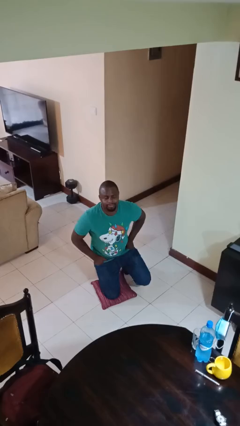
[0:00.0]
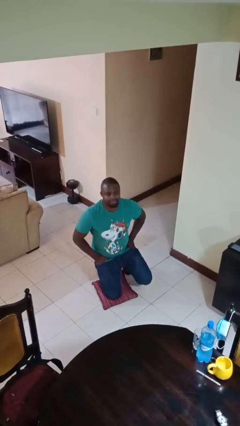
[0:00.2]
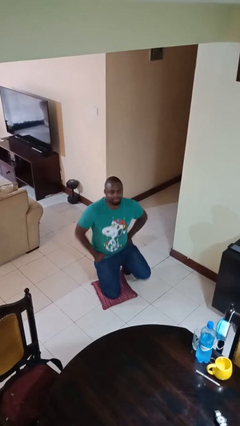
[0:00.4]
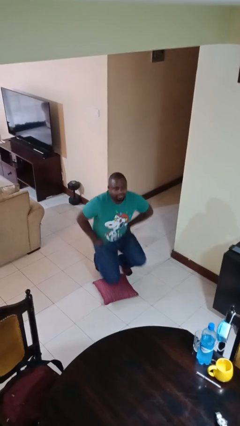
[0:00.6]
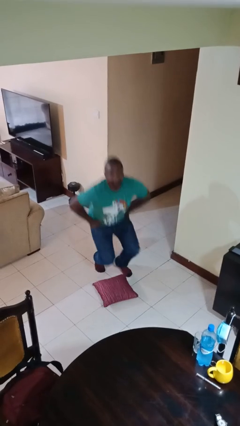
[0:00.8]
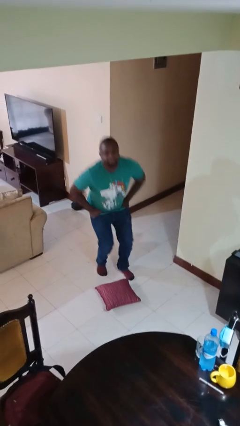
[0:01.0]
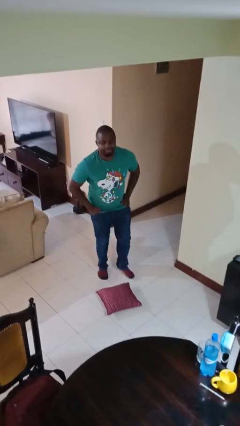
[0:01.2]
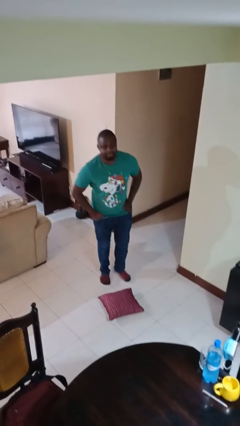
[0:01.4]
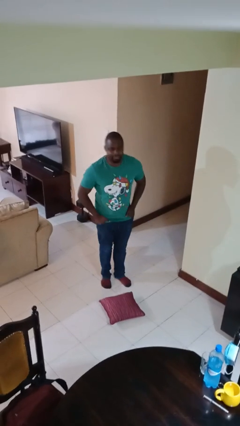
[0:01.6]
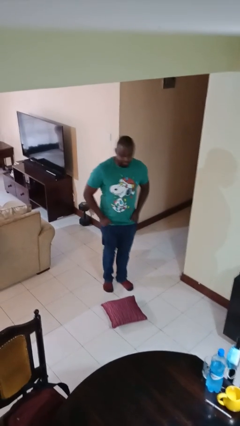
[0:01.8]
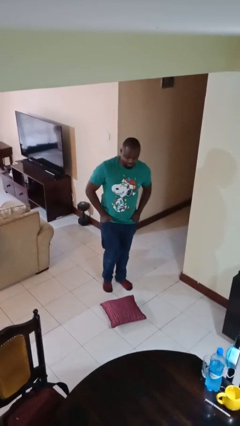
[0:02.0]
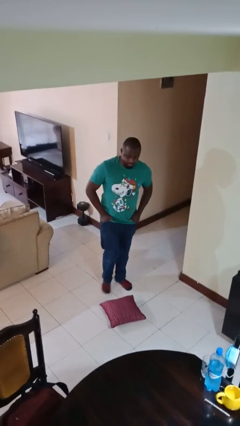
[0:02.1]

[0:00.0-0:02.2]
person stands up from floor

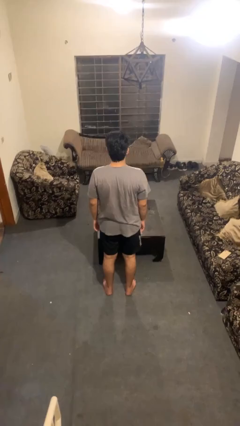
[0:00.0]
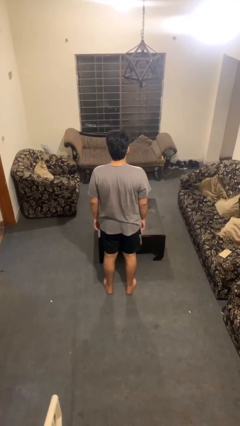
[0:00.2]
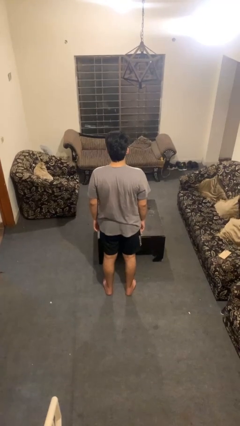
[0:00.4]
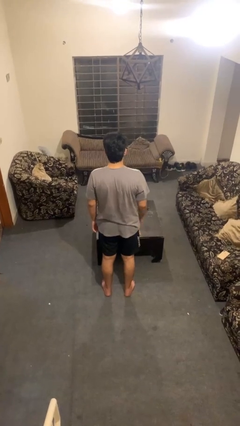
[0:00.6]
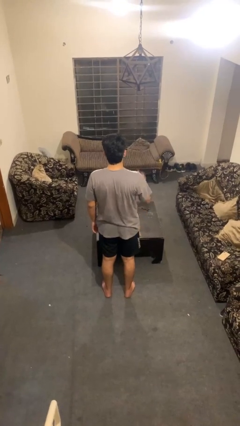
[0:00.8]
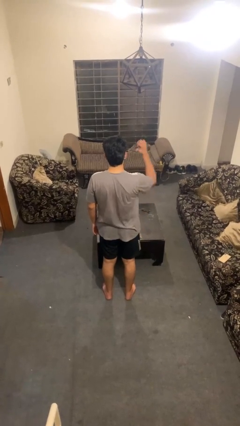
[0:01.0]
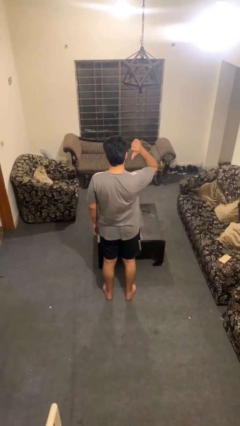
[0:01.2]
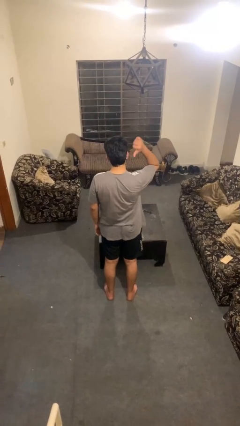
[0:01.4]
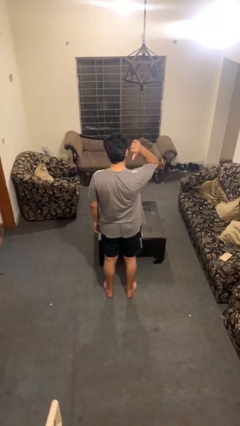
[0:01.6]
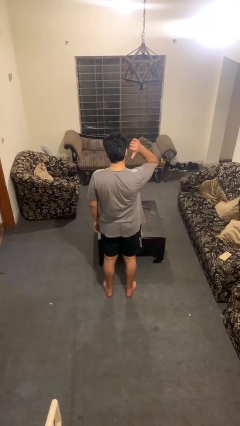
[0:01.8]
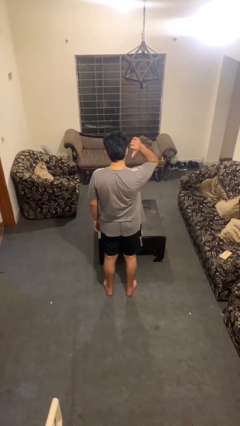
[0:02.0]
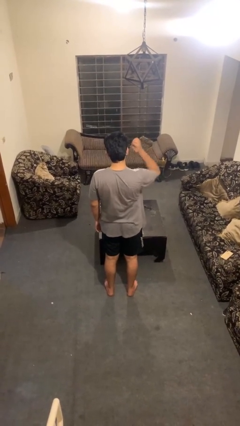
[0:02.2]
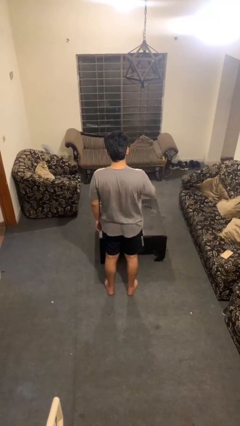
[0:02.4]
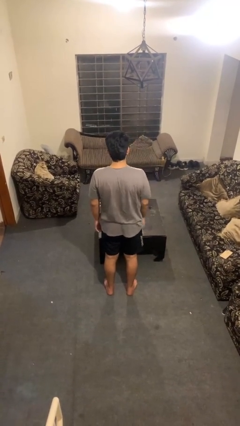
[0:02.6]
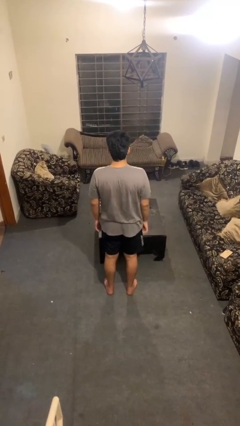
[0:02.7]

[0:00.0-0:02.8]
person gestures behind me

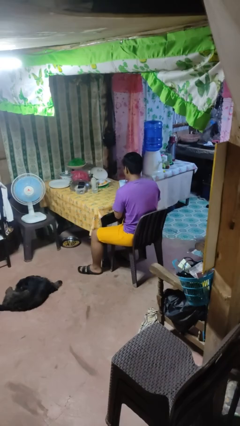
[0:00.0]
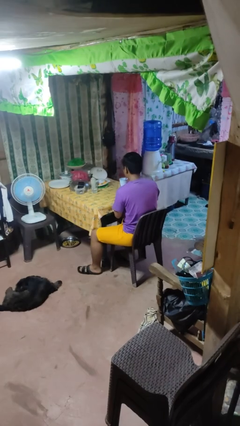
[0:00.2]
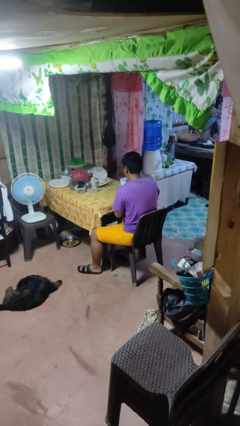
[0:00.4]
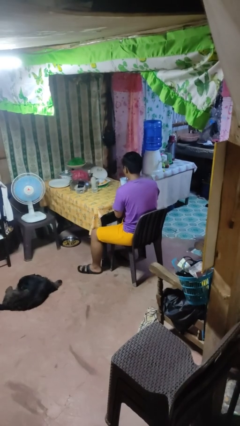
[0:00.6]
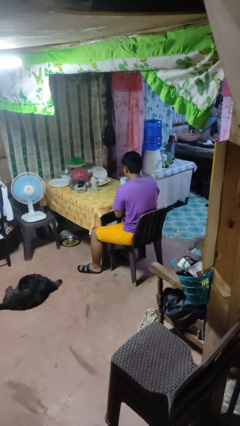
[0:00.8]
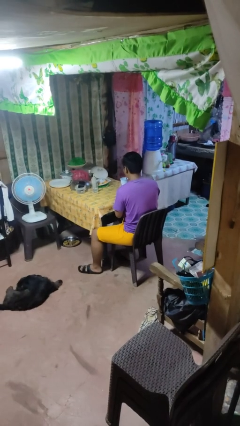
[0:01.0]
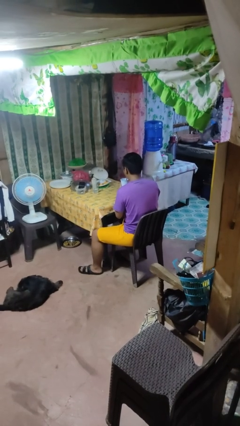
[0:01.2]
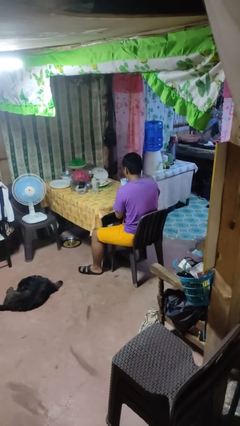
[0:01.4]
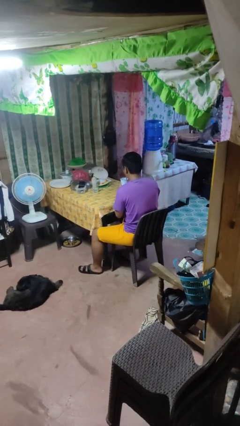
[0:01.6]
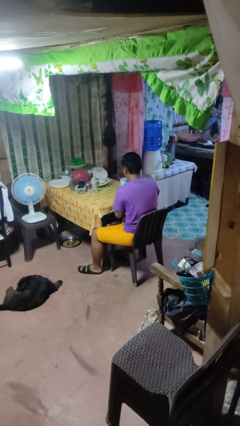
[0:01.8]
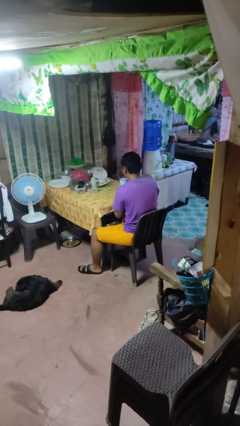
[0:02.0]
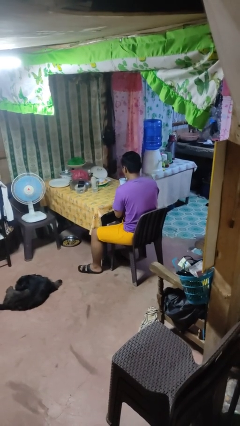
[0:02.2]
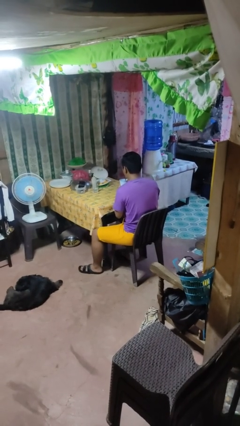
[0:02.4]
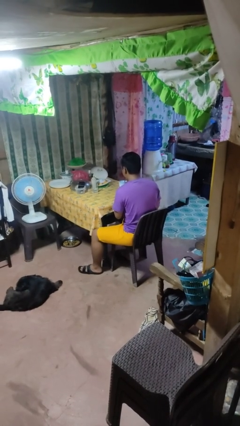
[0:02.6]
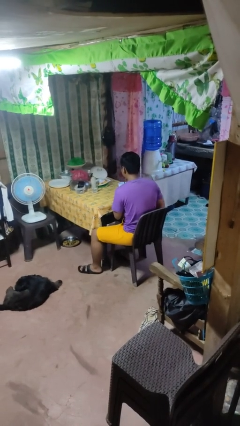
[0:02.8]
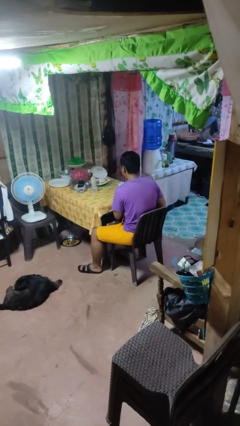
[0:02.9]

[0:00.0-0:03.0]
person drinks from straw

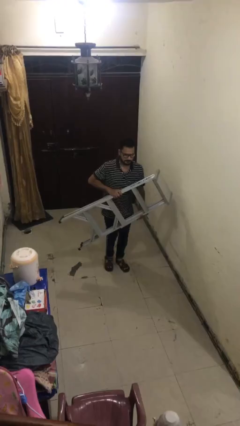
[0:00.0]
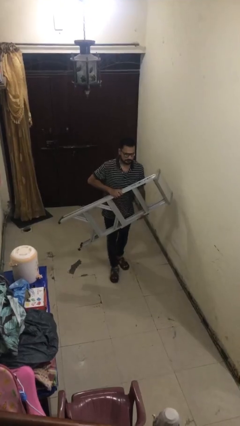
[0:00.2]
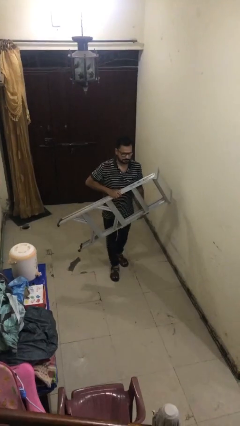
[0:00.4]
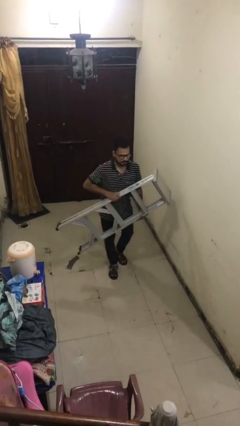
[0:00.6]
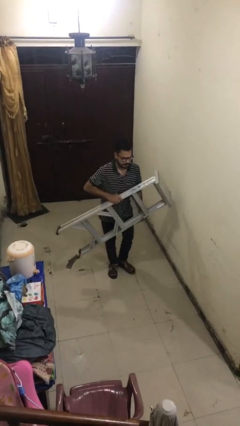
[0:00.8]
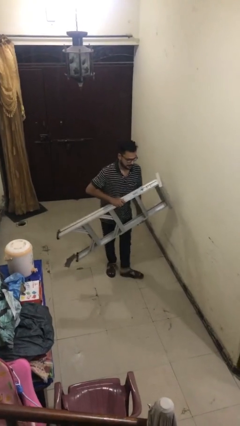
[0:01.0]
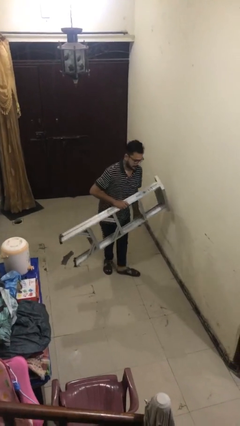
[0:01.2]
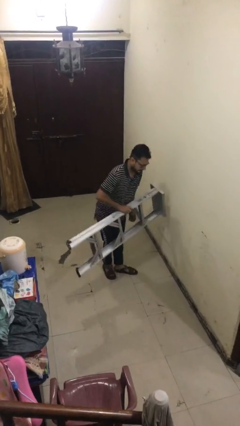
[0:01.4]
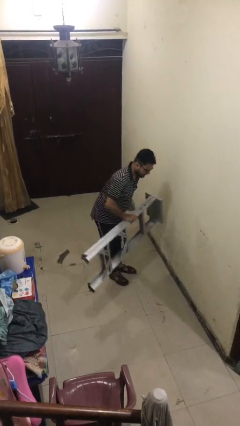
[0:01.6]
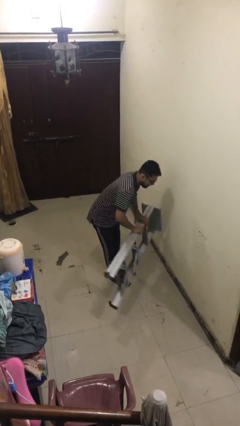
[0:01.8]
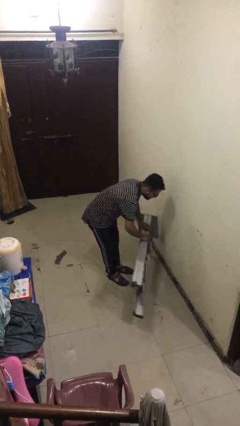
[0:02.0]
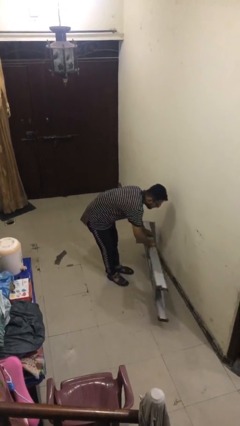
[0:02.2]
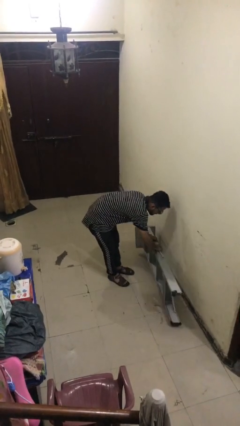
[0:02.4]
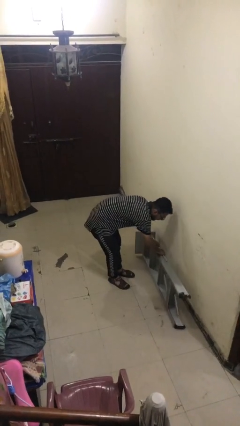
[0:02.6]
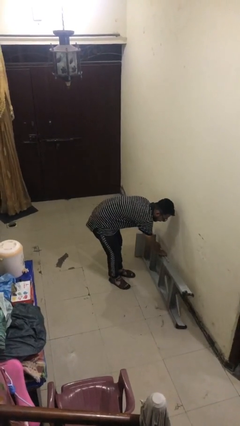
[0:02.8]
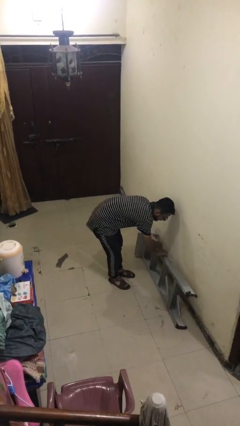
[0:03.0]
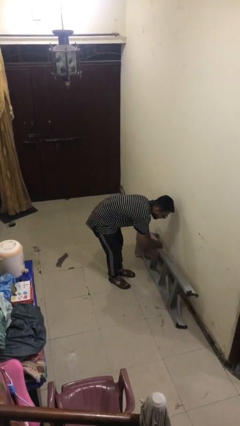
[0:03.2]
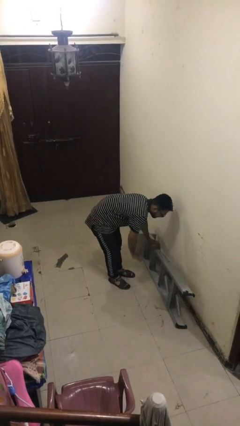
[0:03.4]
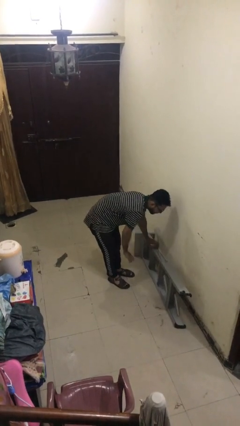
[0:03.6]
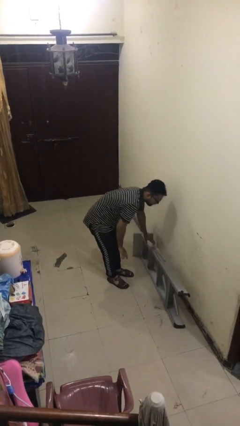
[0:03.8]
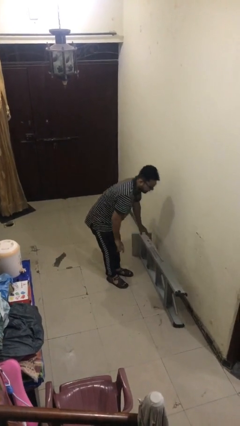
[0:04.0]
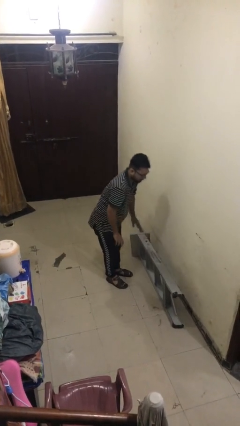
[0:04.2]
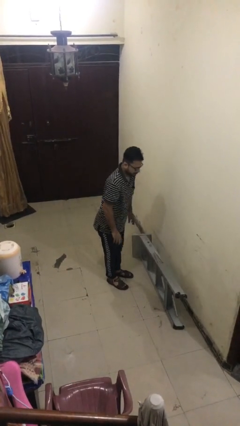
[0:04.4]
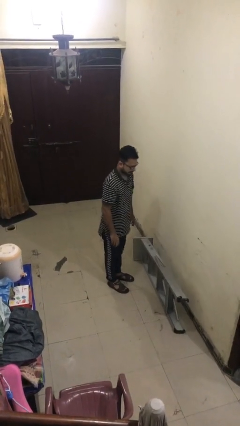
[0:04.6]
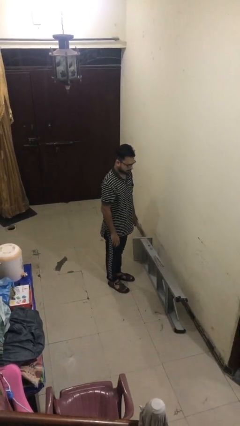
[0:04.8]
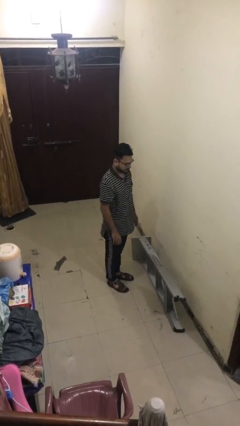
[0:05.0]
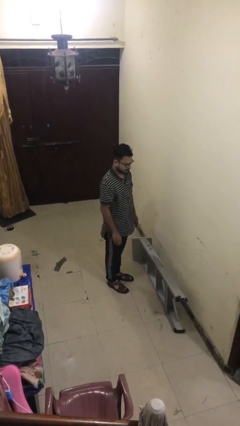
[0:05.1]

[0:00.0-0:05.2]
person puts down object on floor

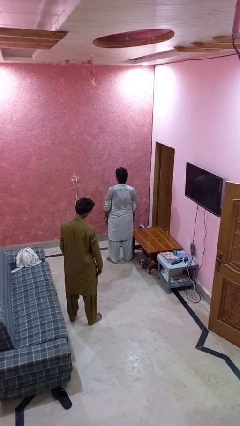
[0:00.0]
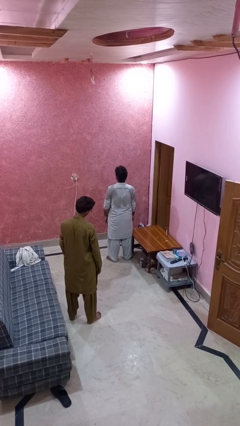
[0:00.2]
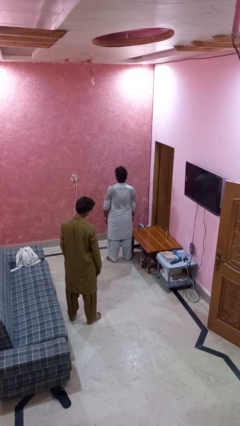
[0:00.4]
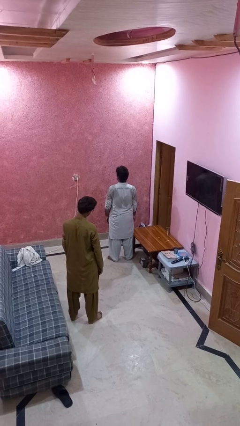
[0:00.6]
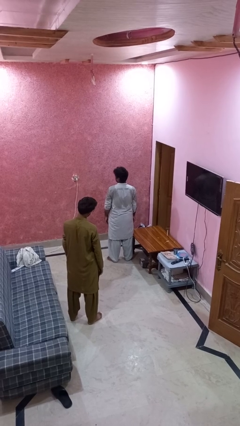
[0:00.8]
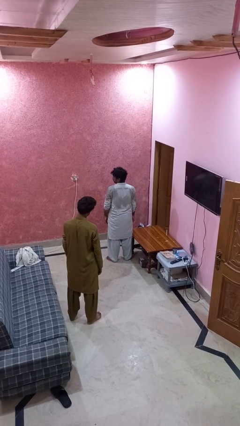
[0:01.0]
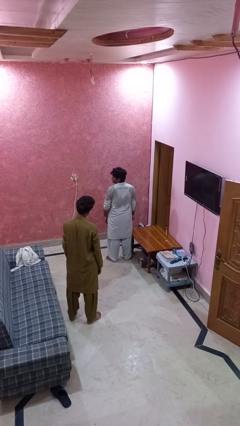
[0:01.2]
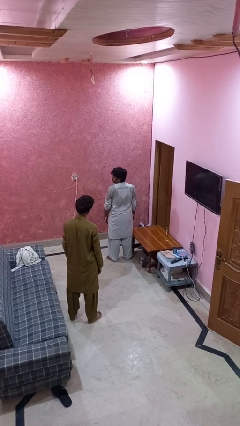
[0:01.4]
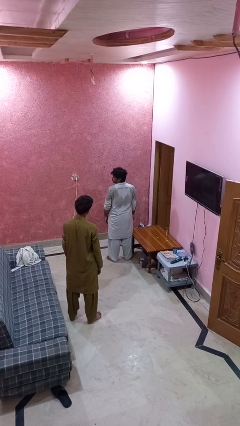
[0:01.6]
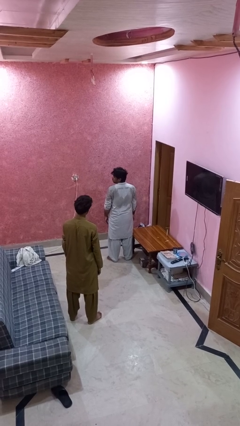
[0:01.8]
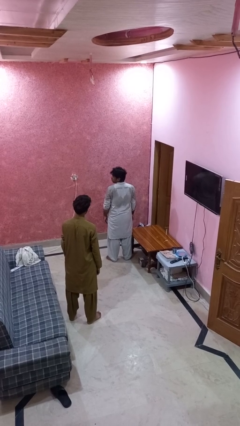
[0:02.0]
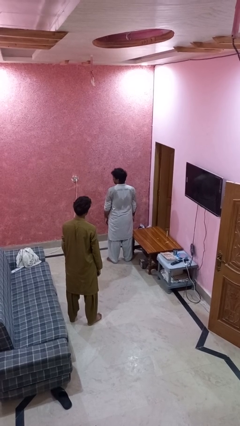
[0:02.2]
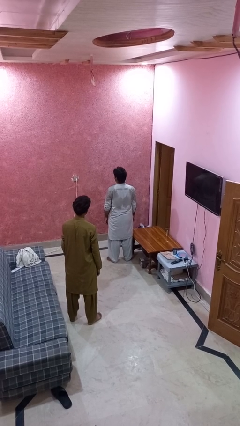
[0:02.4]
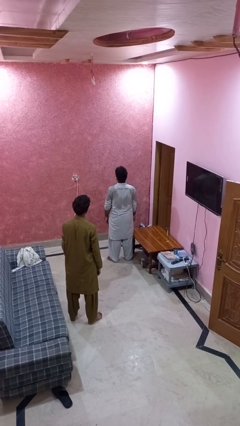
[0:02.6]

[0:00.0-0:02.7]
person looks over shoulder

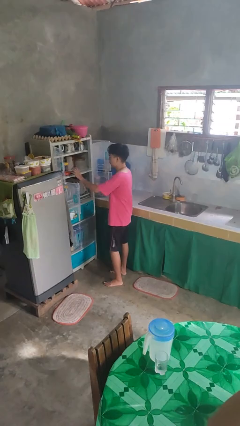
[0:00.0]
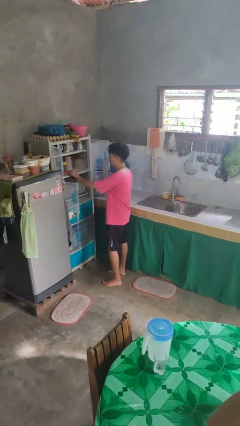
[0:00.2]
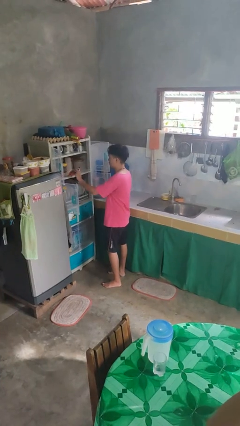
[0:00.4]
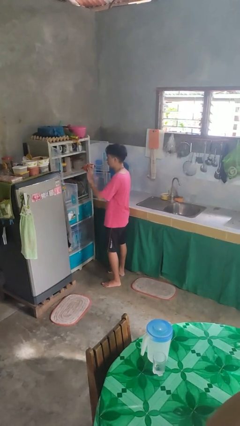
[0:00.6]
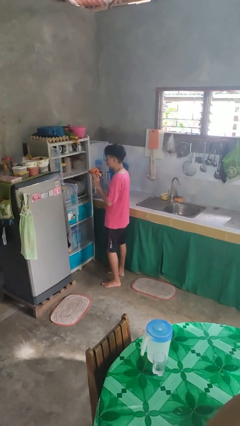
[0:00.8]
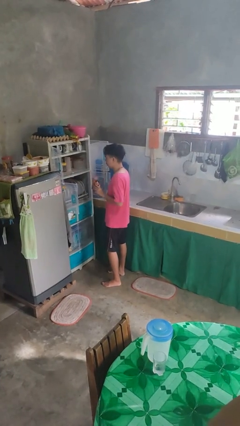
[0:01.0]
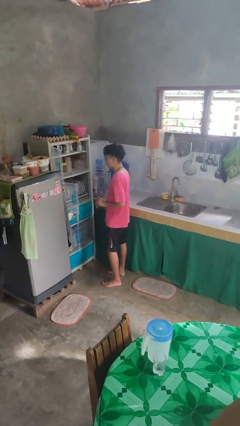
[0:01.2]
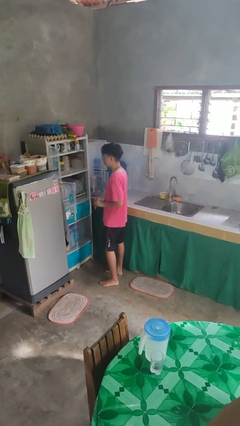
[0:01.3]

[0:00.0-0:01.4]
person takes object from cabinet
